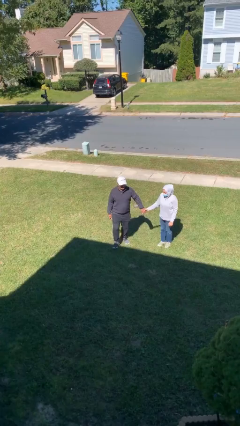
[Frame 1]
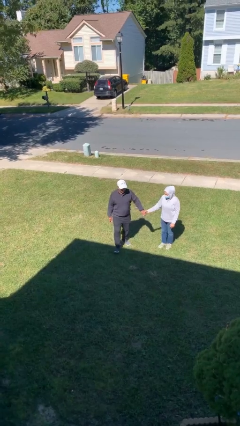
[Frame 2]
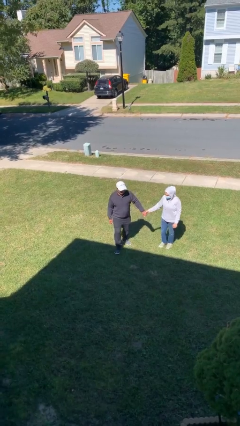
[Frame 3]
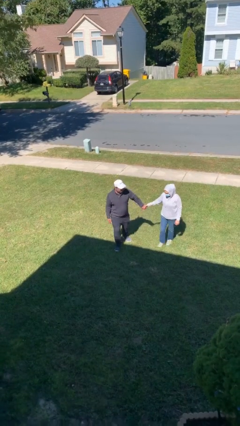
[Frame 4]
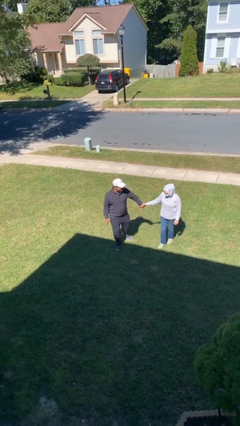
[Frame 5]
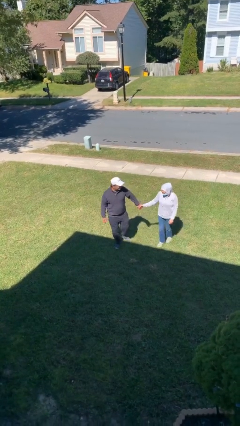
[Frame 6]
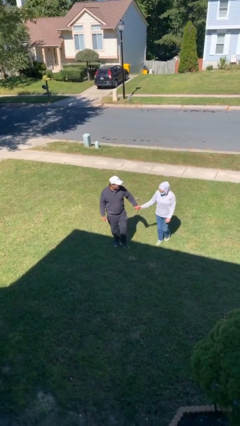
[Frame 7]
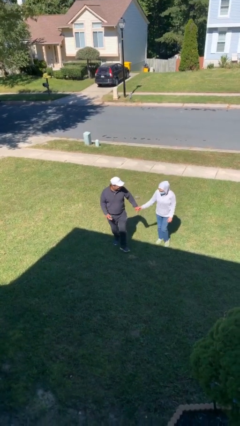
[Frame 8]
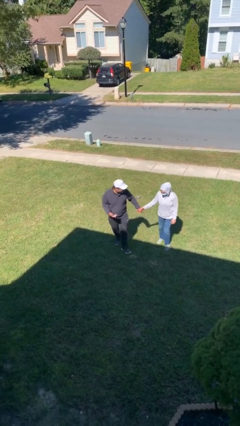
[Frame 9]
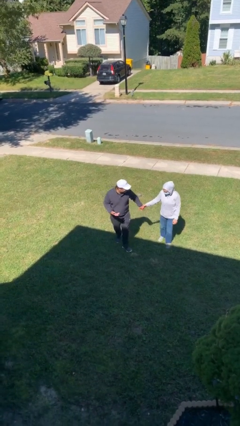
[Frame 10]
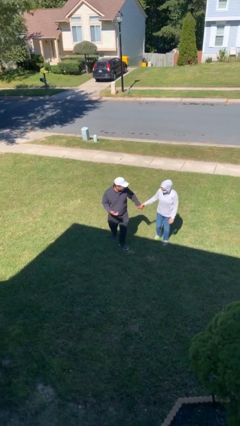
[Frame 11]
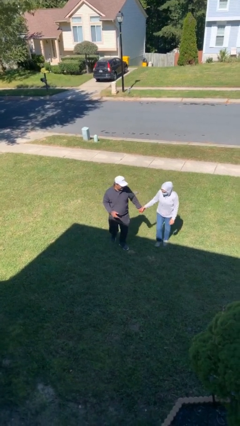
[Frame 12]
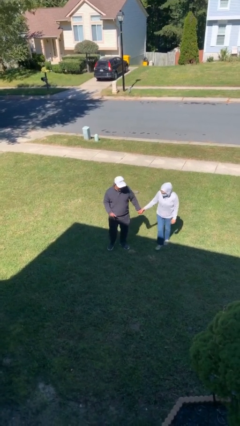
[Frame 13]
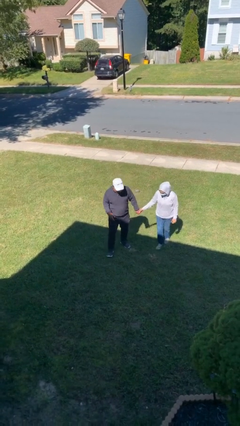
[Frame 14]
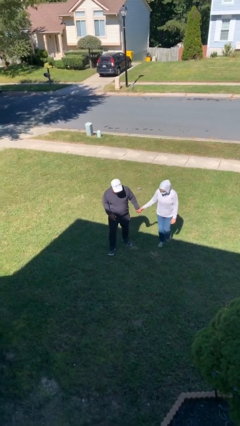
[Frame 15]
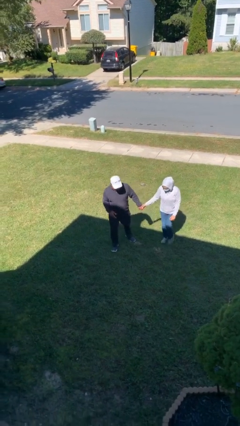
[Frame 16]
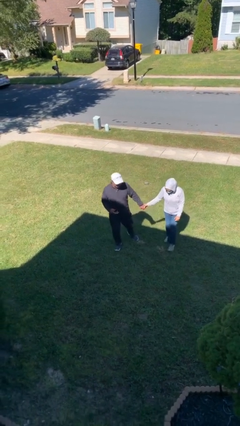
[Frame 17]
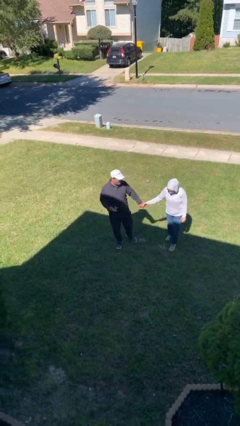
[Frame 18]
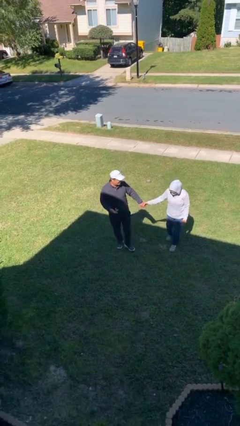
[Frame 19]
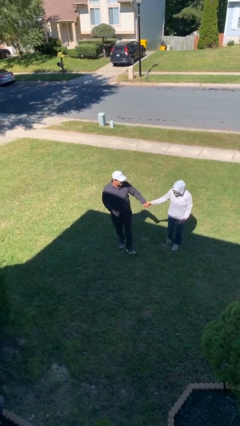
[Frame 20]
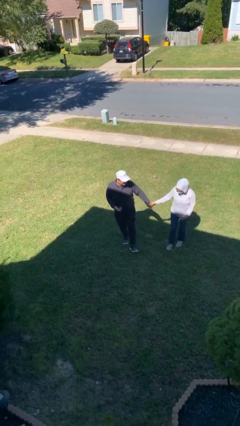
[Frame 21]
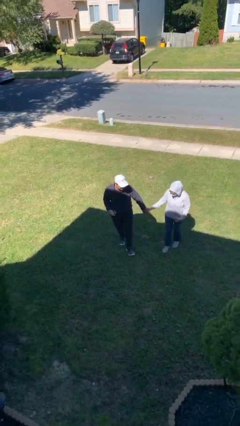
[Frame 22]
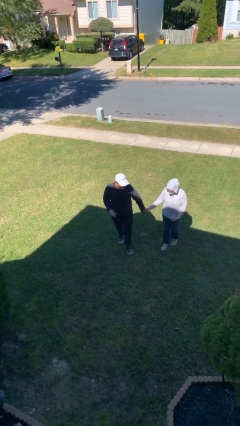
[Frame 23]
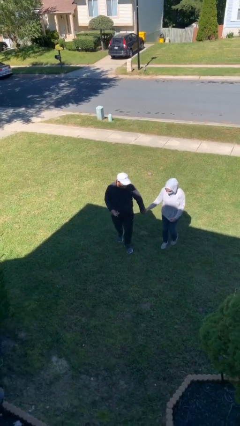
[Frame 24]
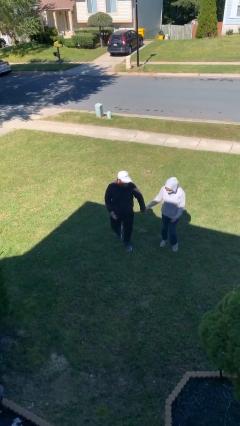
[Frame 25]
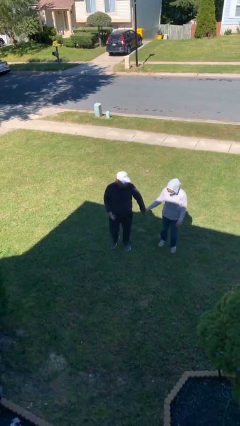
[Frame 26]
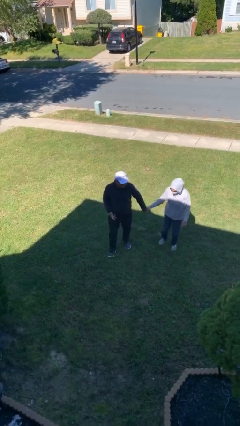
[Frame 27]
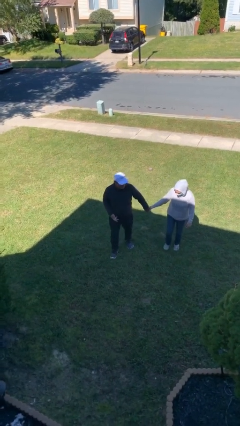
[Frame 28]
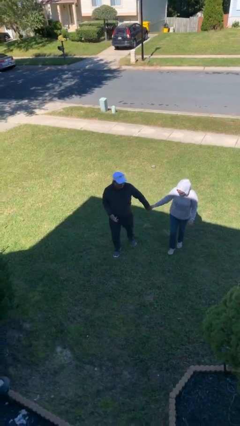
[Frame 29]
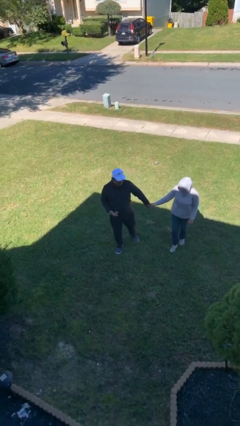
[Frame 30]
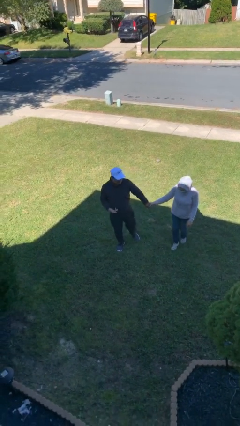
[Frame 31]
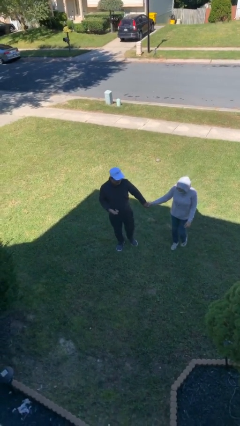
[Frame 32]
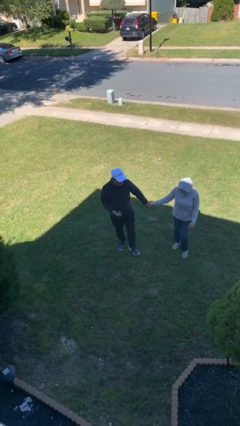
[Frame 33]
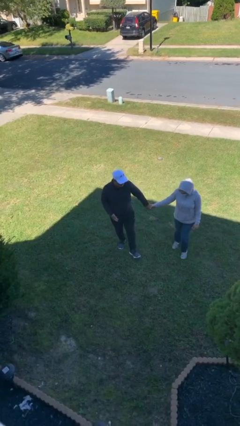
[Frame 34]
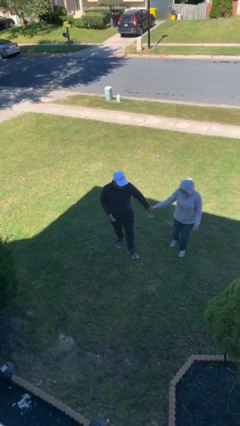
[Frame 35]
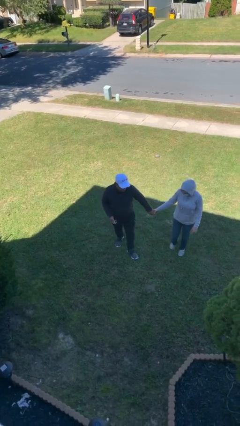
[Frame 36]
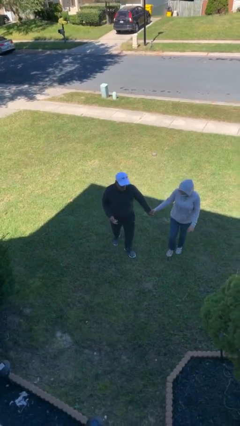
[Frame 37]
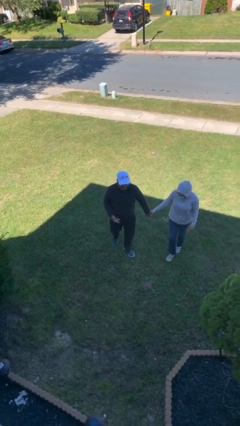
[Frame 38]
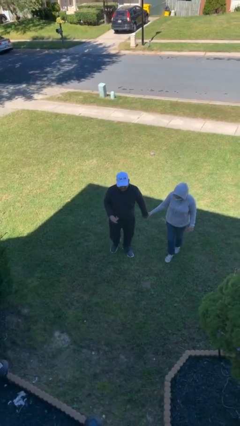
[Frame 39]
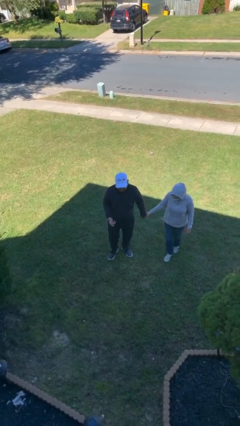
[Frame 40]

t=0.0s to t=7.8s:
person holds hand

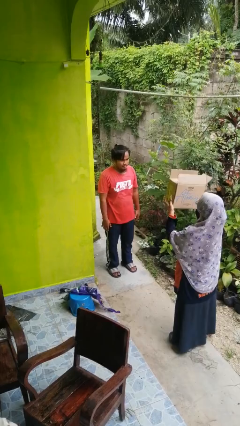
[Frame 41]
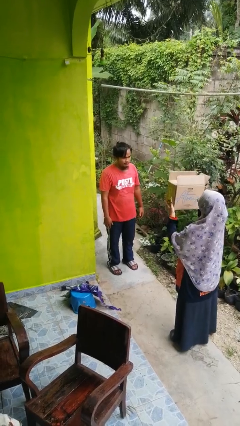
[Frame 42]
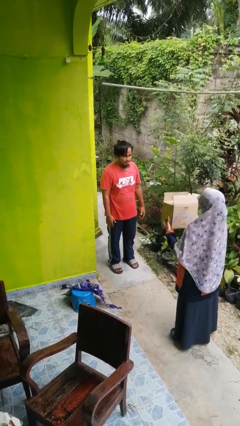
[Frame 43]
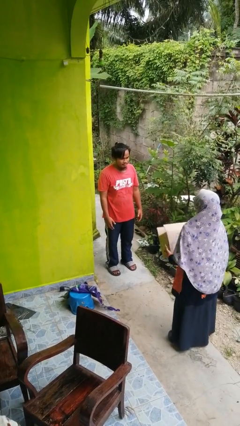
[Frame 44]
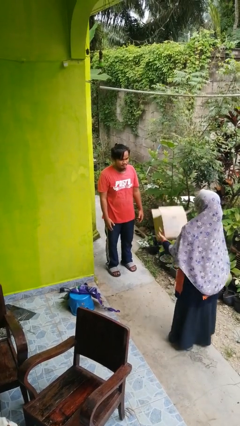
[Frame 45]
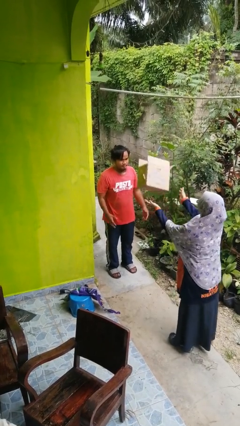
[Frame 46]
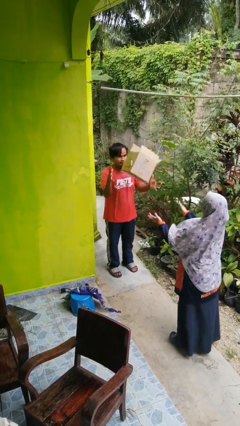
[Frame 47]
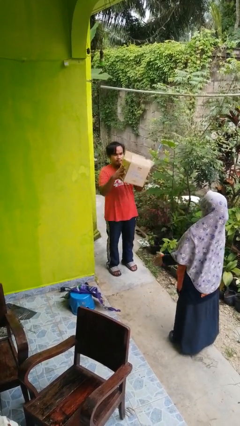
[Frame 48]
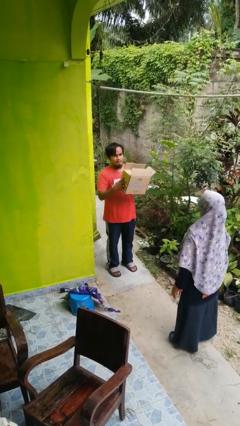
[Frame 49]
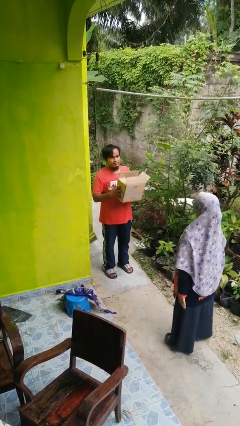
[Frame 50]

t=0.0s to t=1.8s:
person catches object from person

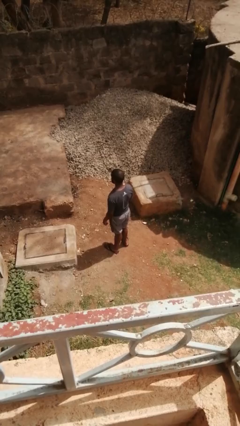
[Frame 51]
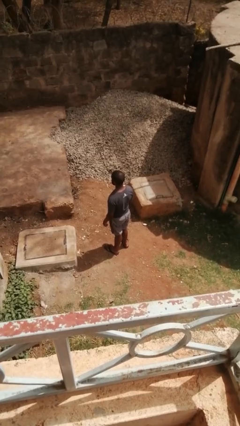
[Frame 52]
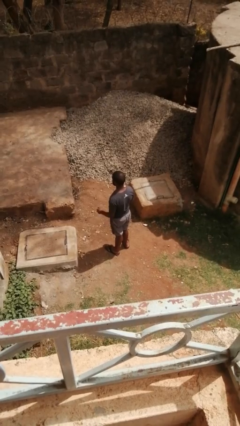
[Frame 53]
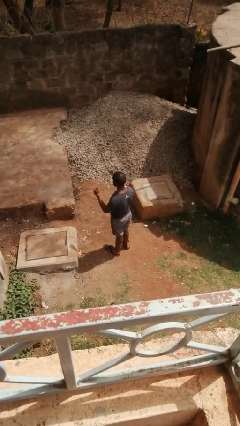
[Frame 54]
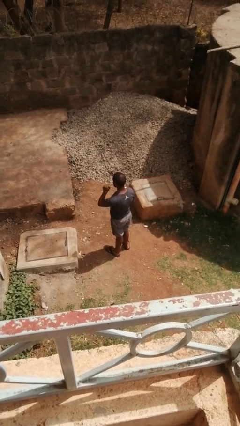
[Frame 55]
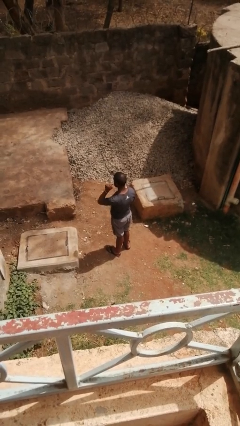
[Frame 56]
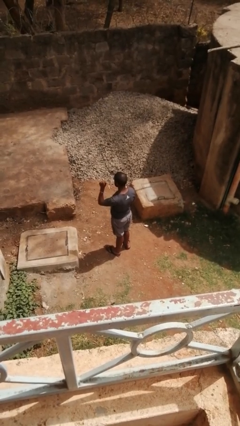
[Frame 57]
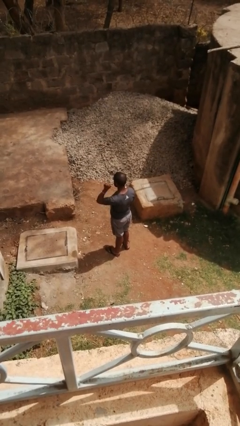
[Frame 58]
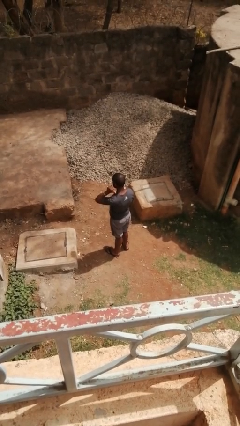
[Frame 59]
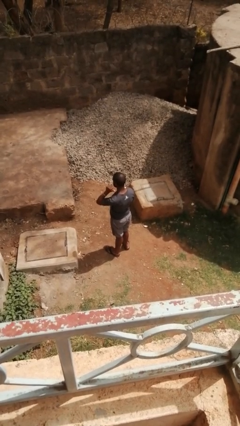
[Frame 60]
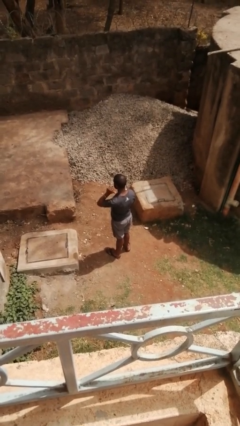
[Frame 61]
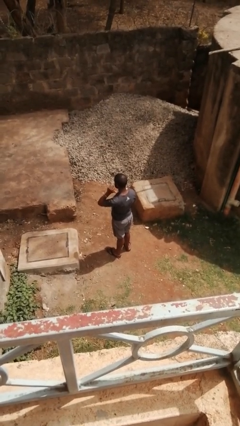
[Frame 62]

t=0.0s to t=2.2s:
person gestures behind me

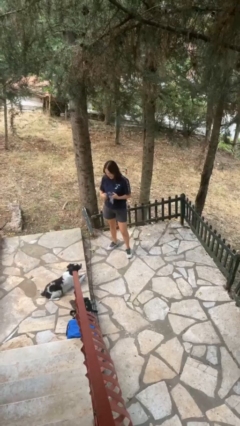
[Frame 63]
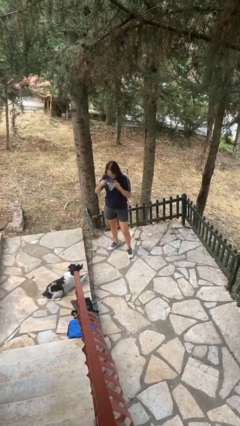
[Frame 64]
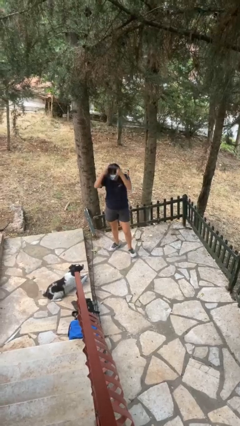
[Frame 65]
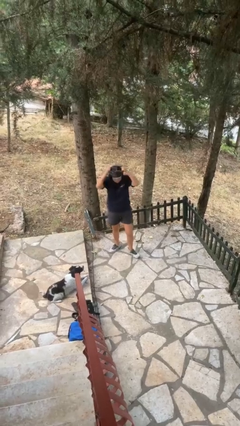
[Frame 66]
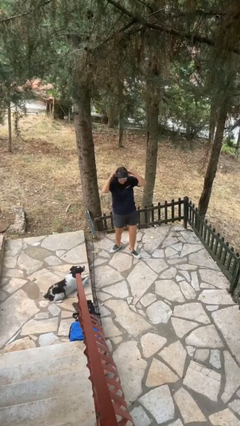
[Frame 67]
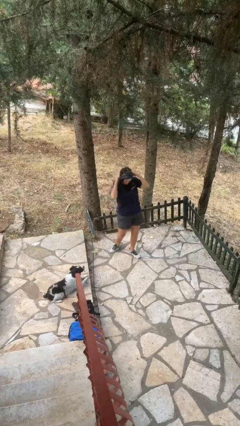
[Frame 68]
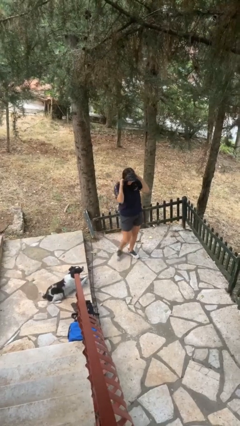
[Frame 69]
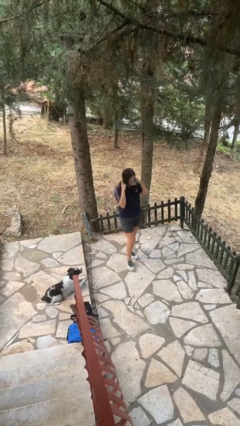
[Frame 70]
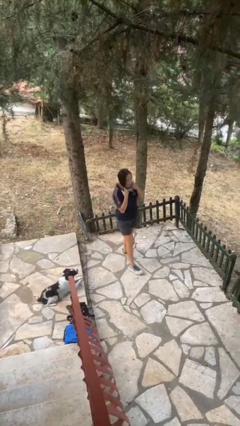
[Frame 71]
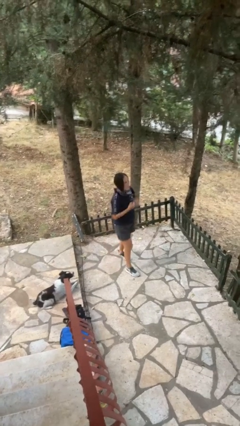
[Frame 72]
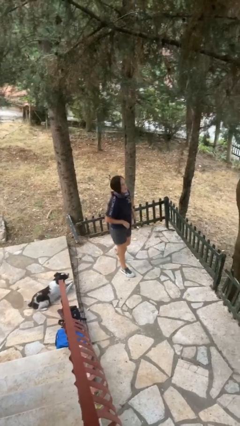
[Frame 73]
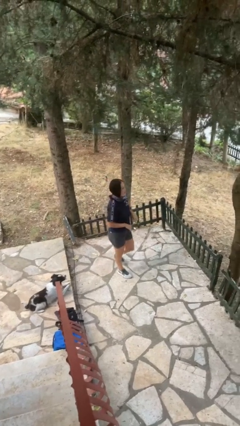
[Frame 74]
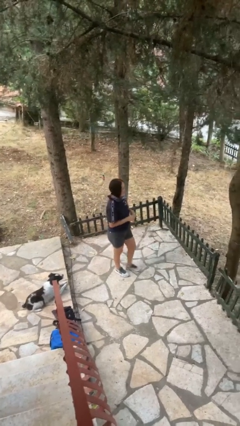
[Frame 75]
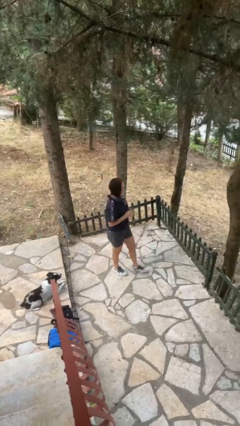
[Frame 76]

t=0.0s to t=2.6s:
person puts on scarf

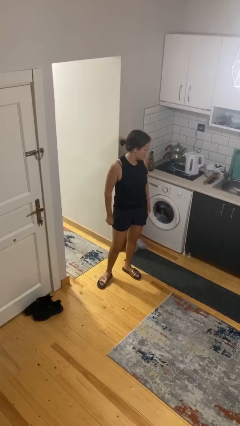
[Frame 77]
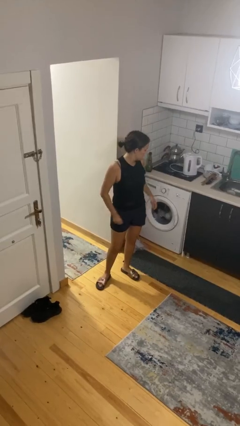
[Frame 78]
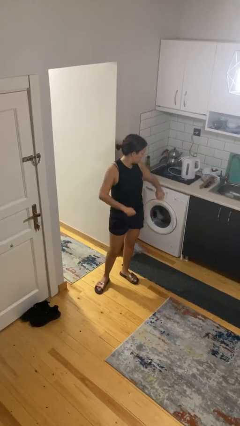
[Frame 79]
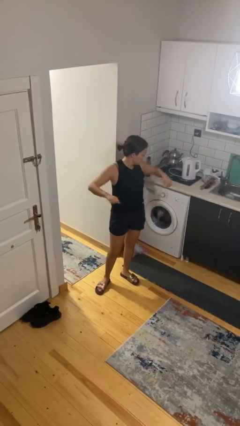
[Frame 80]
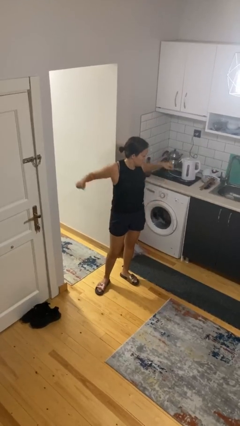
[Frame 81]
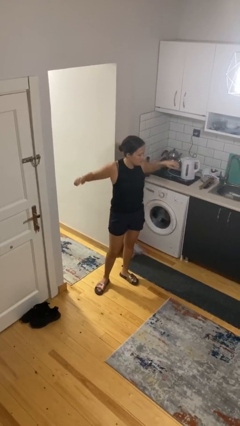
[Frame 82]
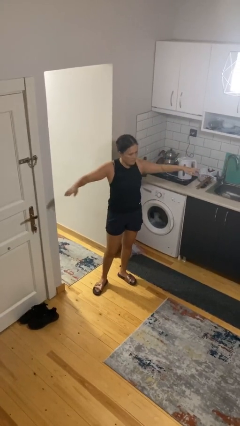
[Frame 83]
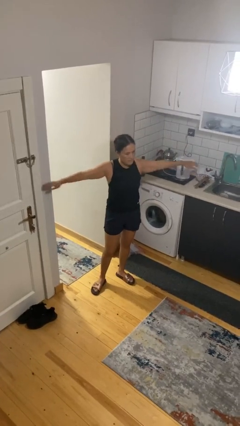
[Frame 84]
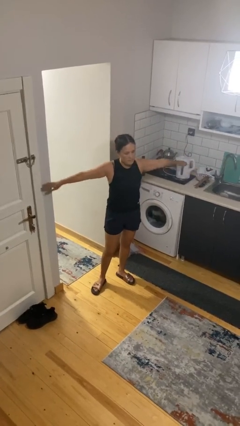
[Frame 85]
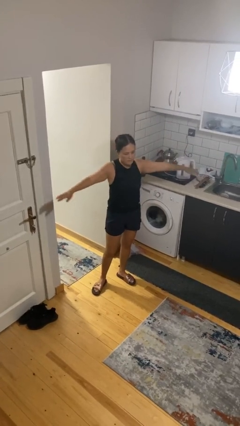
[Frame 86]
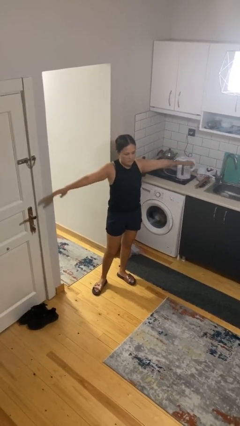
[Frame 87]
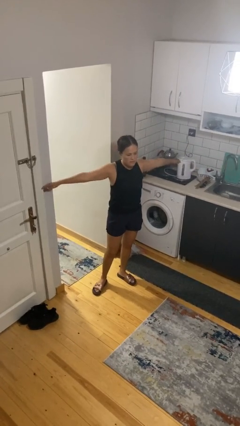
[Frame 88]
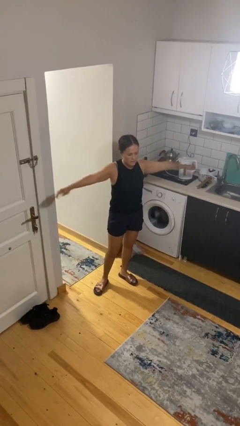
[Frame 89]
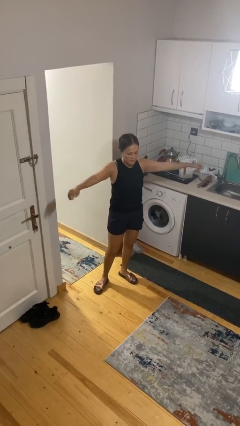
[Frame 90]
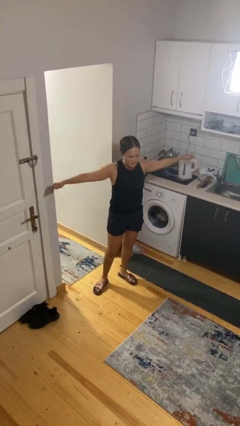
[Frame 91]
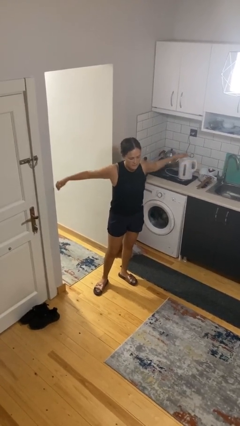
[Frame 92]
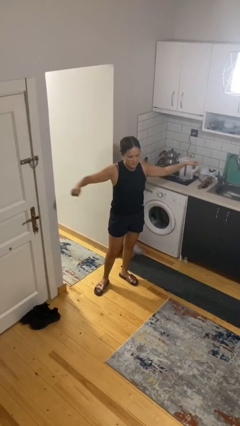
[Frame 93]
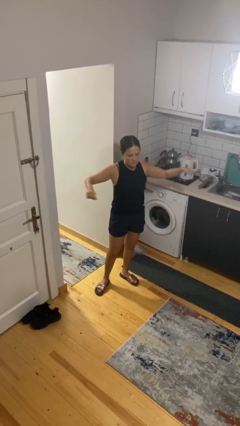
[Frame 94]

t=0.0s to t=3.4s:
person stretches arms to side

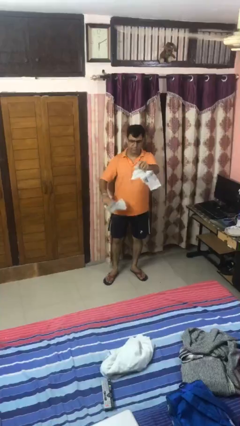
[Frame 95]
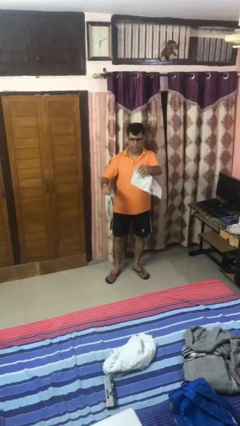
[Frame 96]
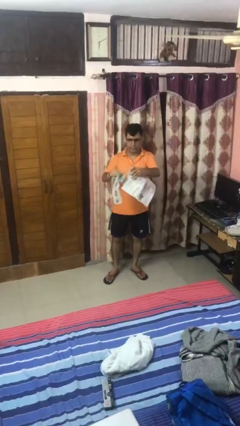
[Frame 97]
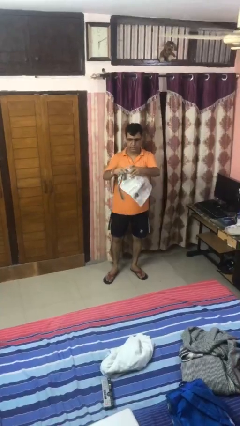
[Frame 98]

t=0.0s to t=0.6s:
person tears paper
